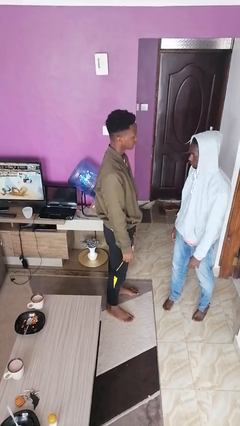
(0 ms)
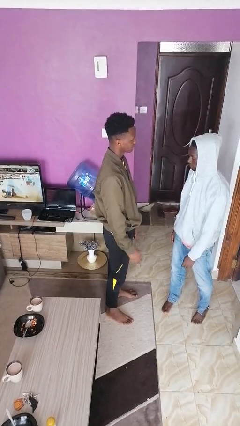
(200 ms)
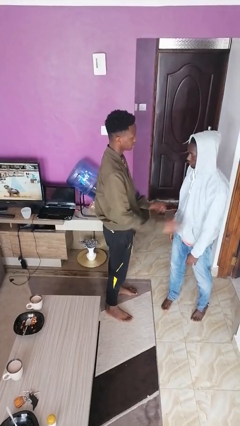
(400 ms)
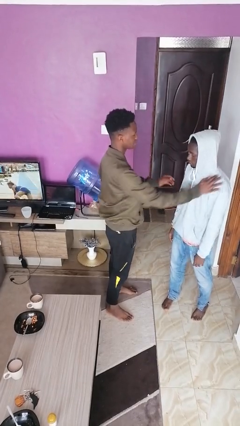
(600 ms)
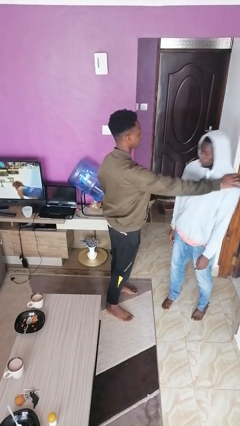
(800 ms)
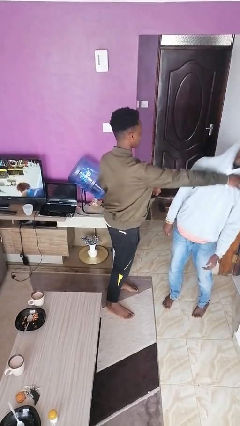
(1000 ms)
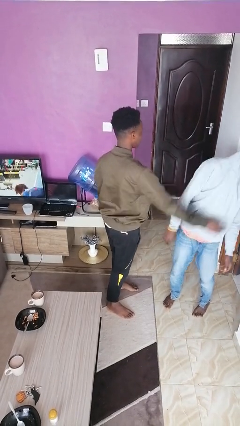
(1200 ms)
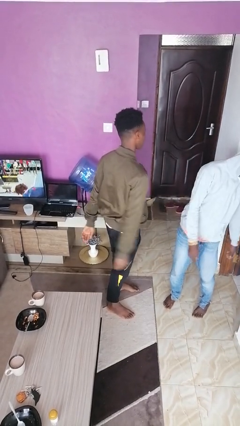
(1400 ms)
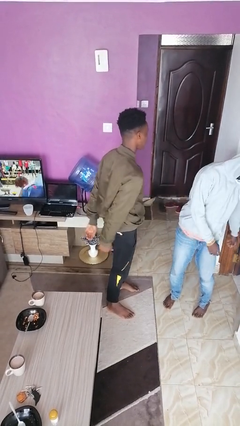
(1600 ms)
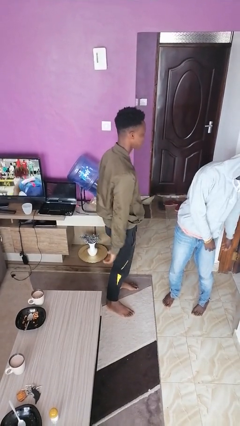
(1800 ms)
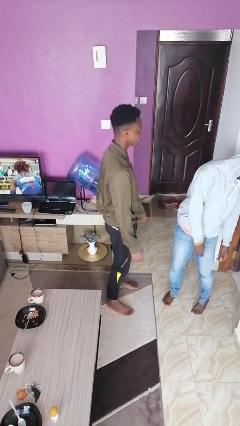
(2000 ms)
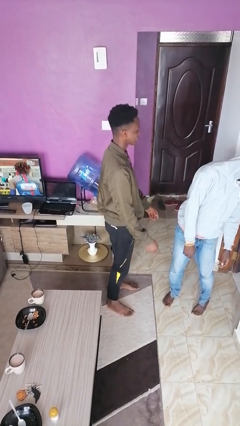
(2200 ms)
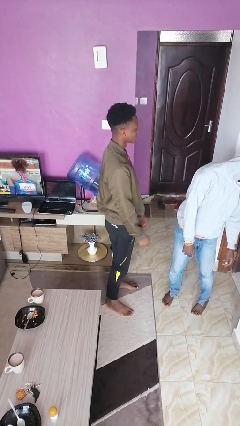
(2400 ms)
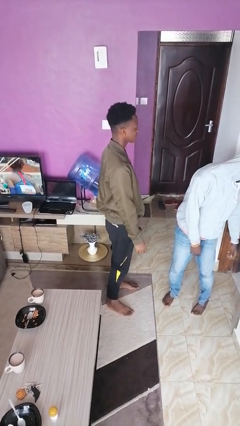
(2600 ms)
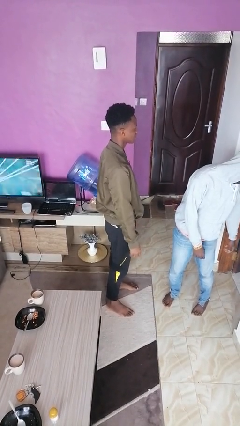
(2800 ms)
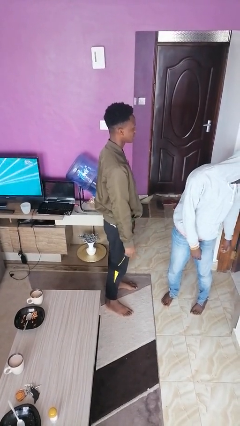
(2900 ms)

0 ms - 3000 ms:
person shoves person

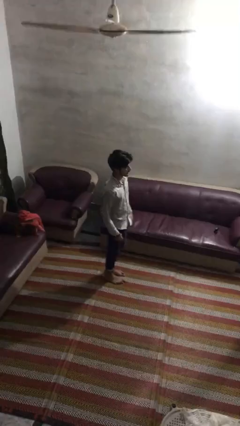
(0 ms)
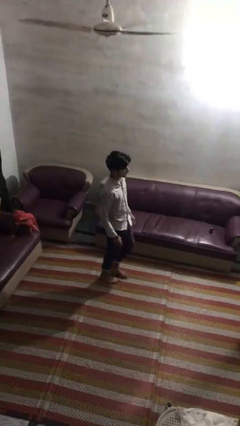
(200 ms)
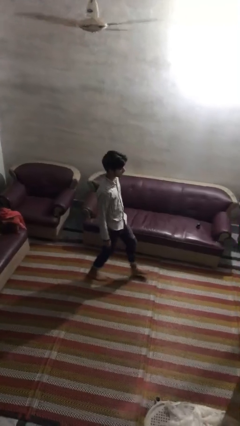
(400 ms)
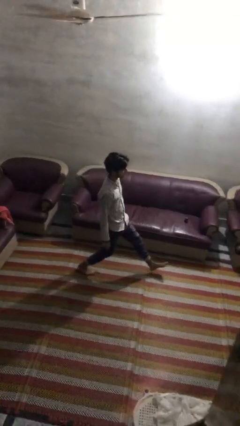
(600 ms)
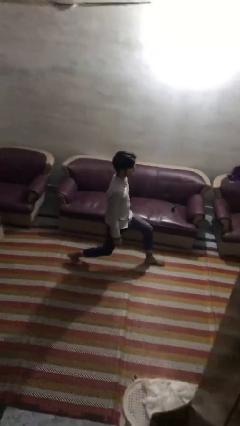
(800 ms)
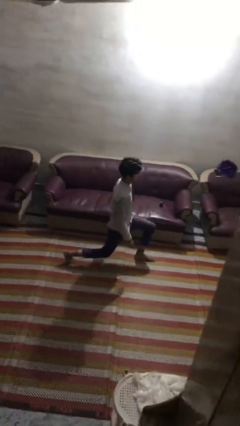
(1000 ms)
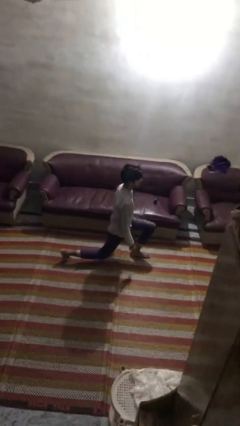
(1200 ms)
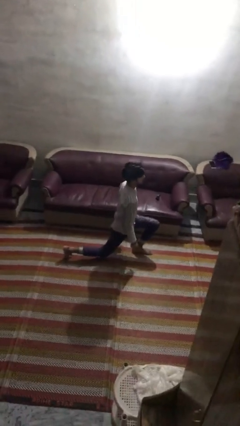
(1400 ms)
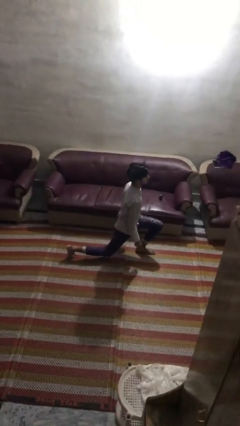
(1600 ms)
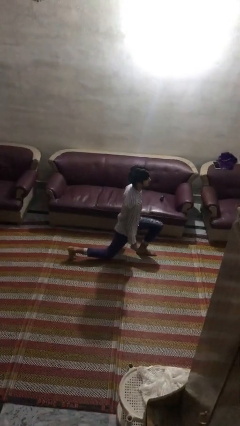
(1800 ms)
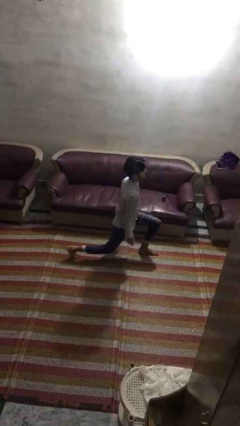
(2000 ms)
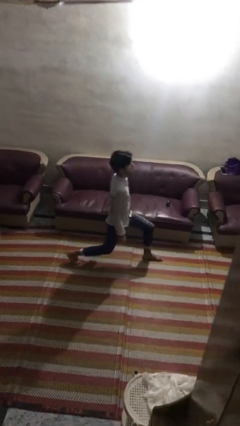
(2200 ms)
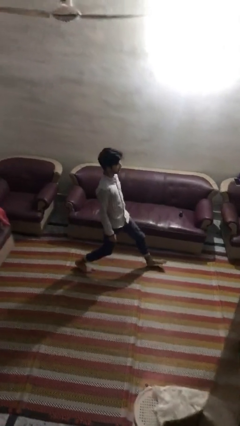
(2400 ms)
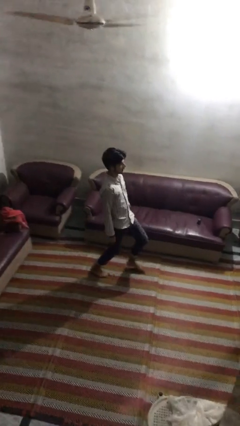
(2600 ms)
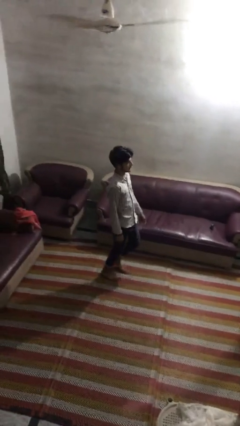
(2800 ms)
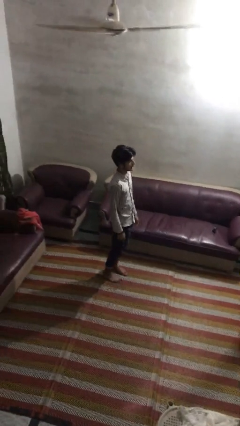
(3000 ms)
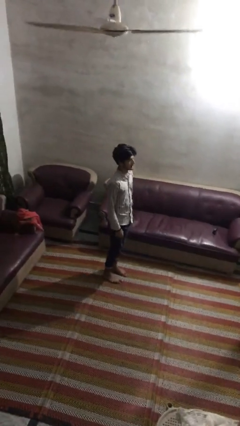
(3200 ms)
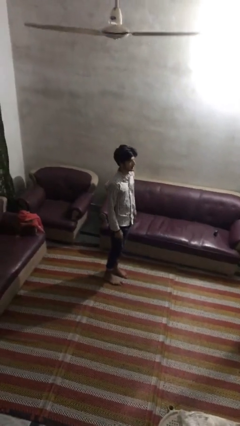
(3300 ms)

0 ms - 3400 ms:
person exercises with lunges

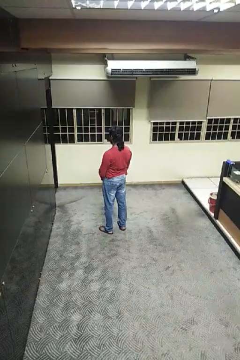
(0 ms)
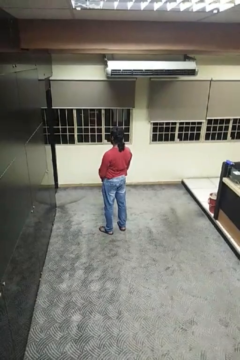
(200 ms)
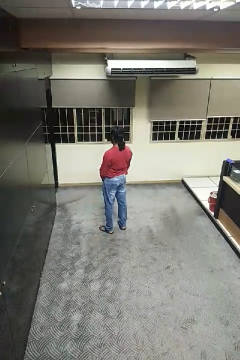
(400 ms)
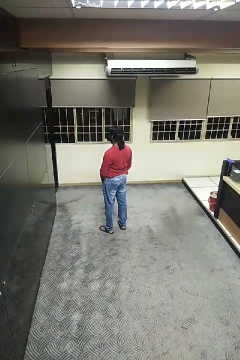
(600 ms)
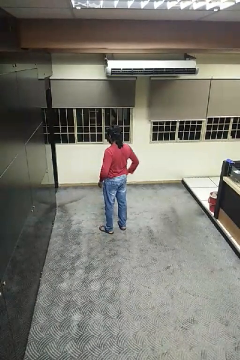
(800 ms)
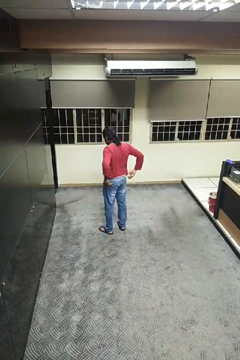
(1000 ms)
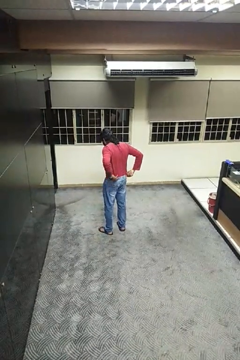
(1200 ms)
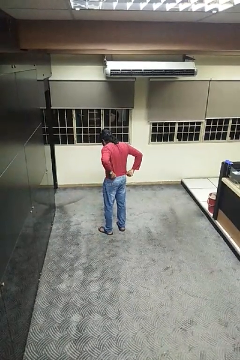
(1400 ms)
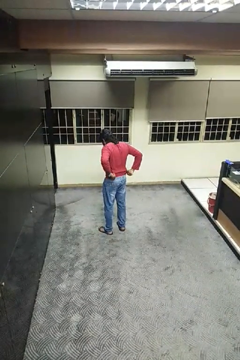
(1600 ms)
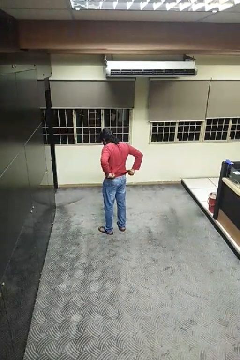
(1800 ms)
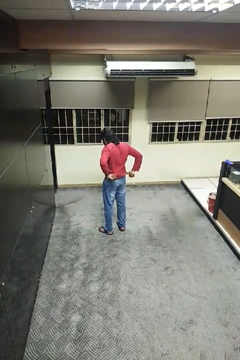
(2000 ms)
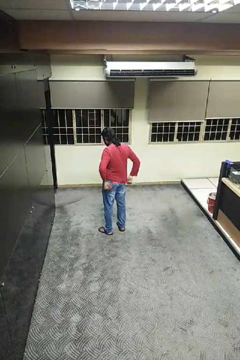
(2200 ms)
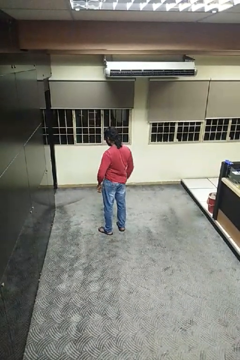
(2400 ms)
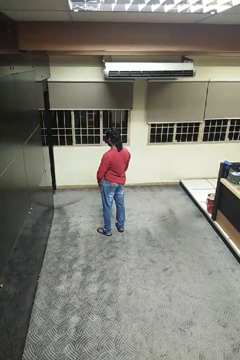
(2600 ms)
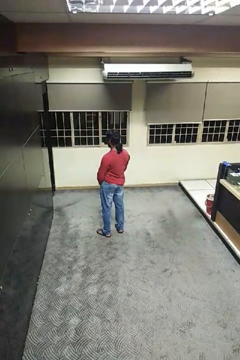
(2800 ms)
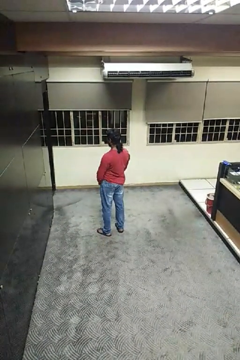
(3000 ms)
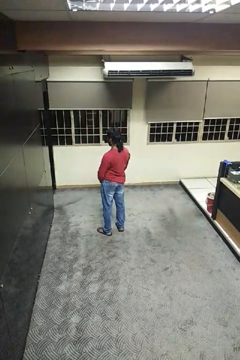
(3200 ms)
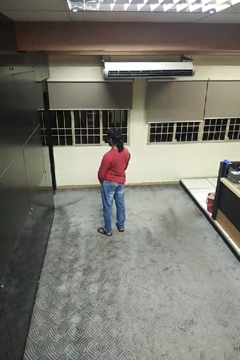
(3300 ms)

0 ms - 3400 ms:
person untucks shirt

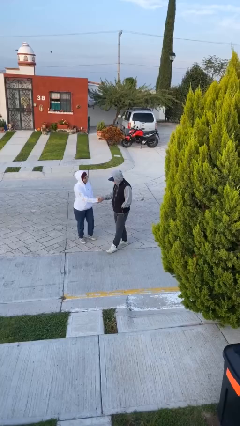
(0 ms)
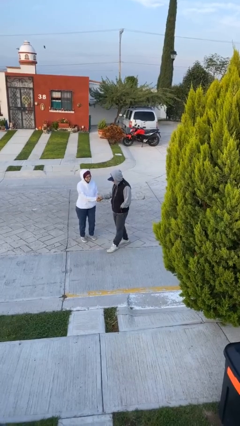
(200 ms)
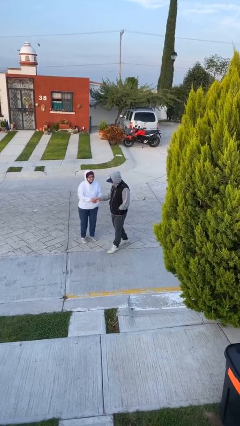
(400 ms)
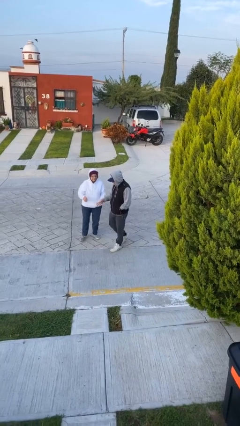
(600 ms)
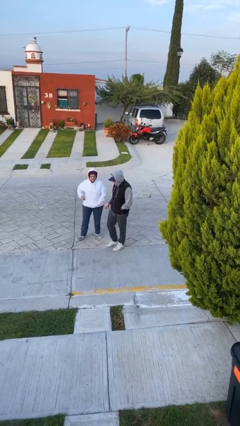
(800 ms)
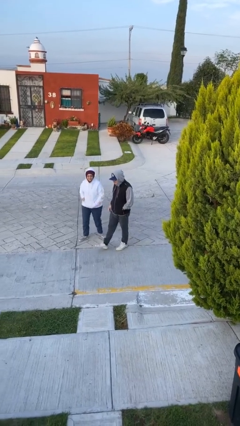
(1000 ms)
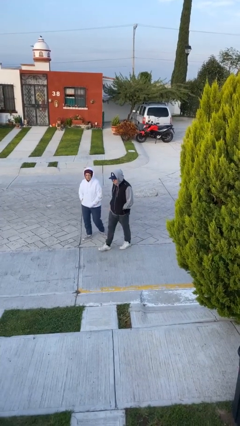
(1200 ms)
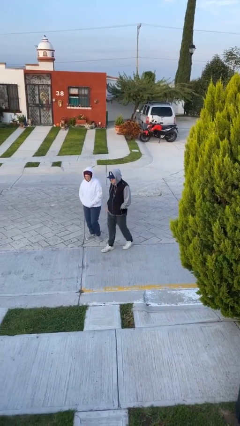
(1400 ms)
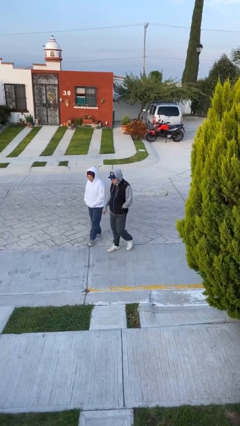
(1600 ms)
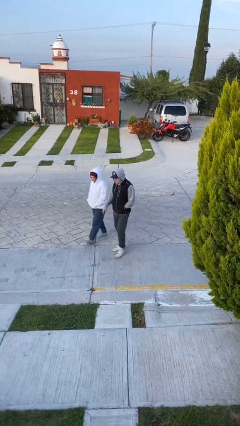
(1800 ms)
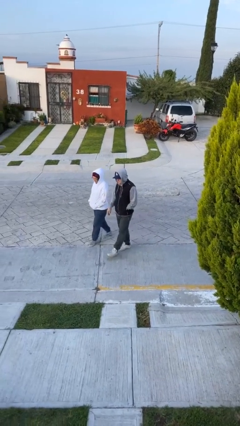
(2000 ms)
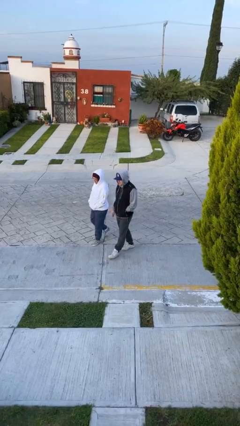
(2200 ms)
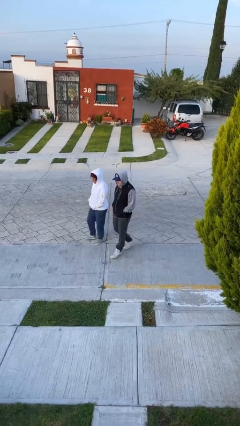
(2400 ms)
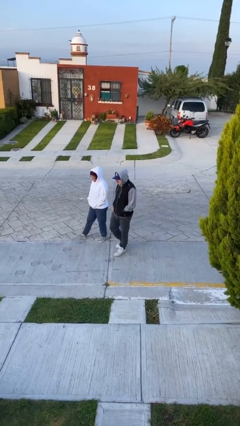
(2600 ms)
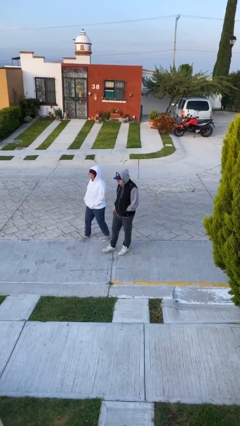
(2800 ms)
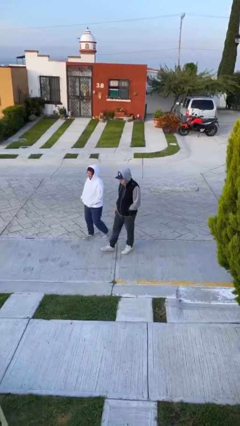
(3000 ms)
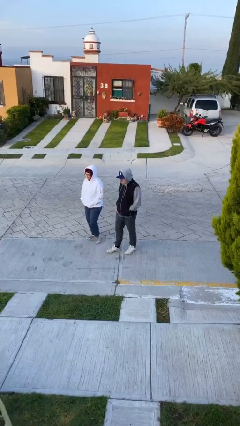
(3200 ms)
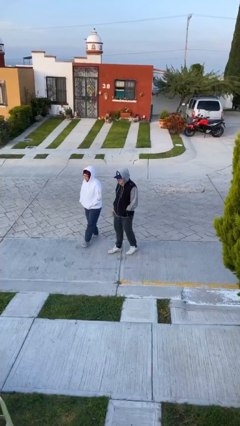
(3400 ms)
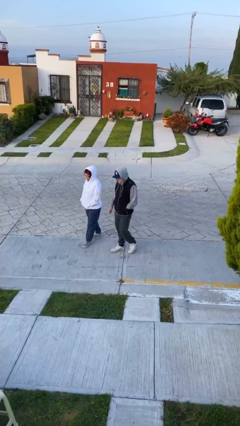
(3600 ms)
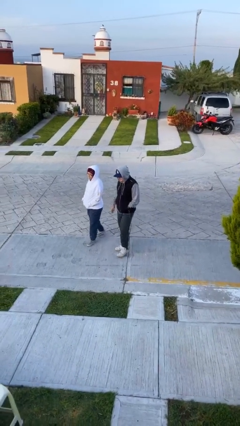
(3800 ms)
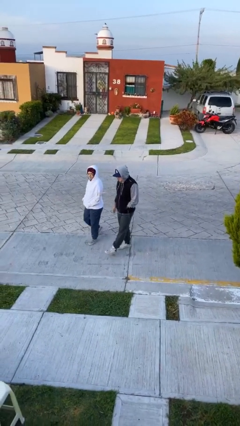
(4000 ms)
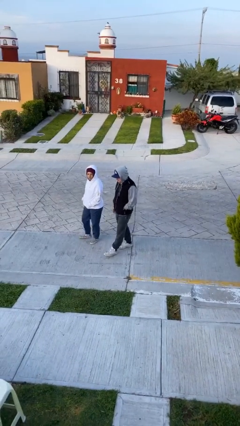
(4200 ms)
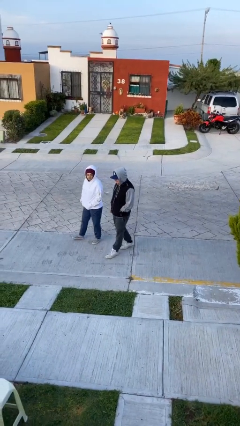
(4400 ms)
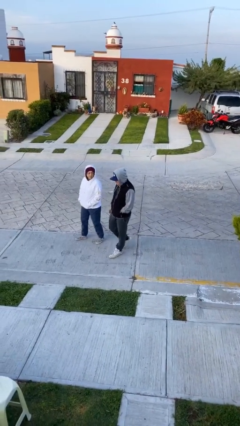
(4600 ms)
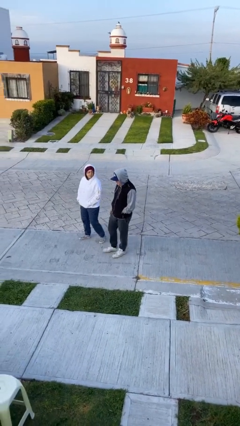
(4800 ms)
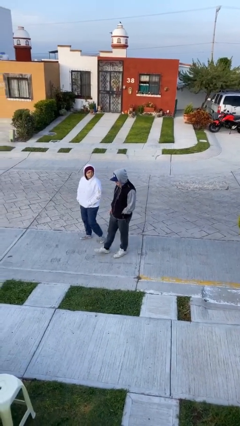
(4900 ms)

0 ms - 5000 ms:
person talks to person

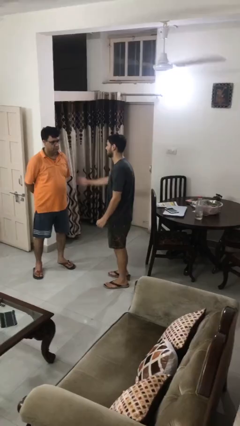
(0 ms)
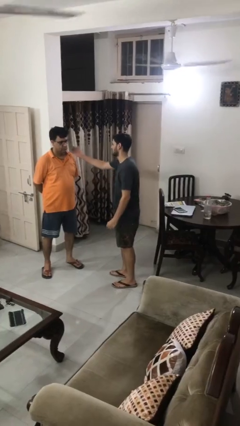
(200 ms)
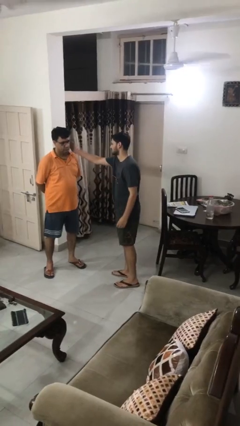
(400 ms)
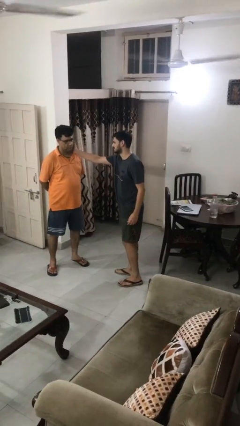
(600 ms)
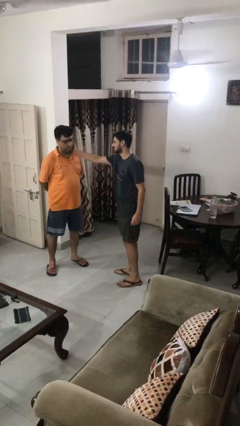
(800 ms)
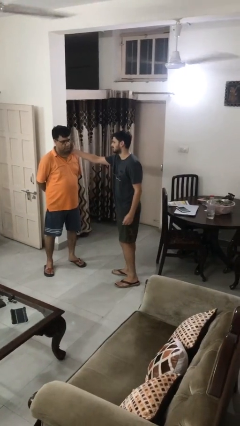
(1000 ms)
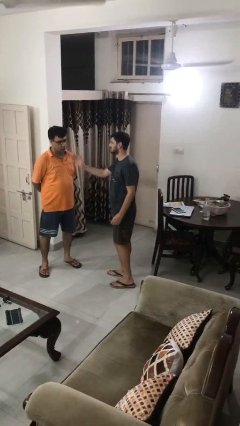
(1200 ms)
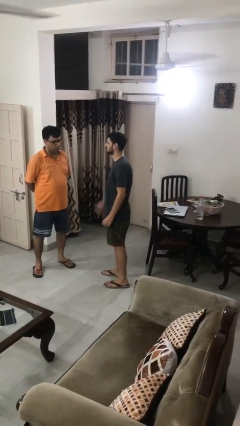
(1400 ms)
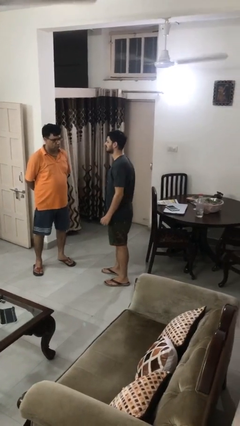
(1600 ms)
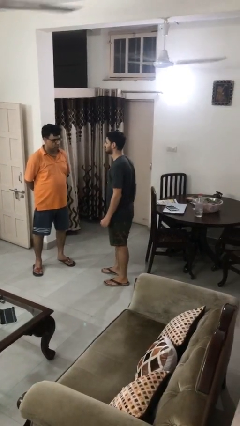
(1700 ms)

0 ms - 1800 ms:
person touches face of person

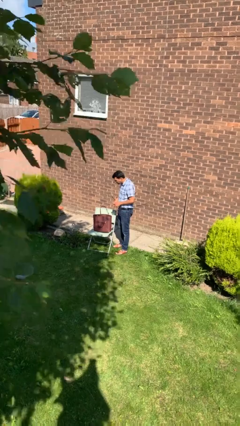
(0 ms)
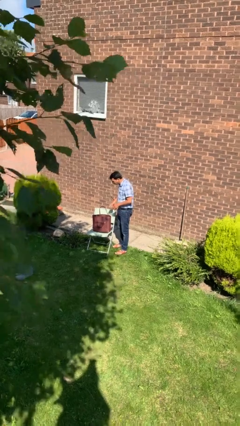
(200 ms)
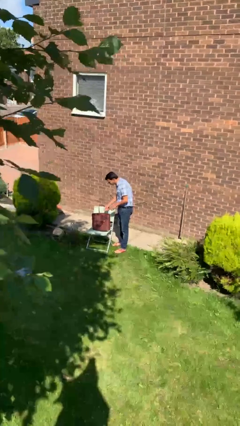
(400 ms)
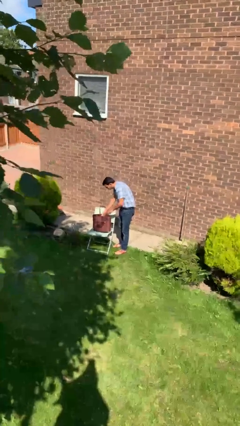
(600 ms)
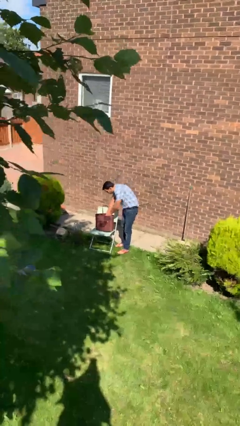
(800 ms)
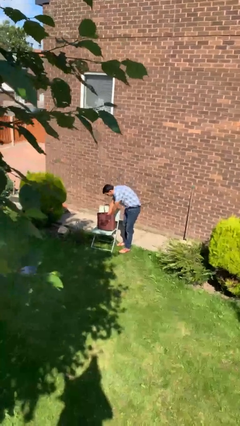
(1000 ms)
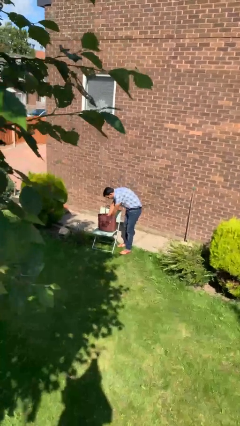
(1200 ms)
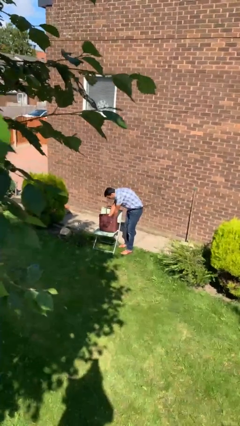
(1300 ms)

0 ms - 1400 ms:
person searches in purse
